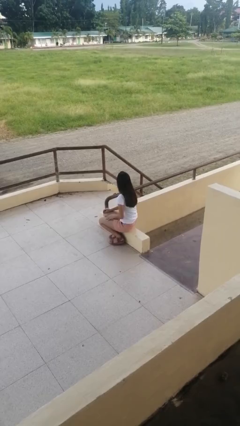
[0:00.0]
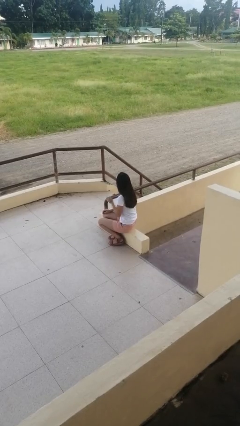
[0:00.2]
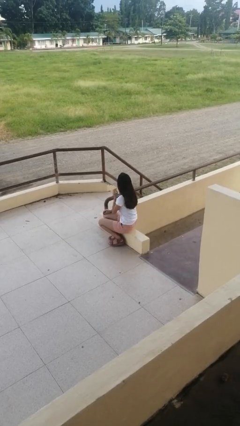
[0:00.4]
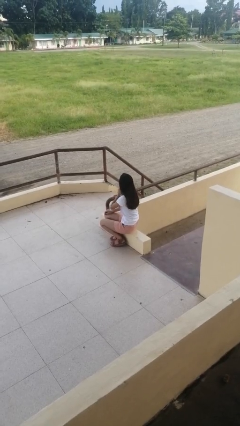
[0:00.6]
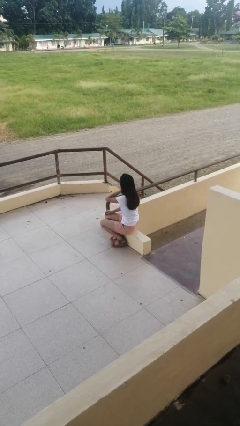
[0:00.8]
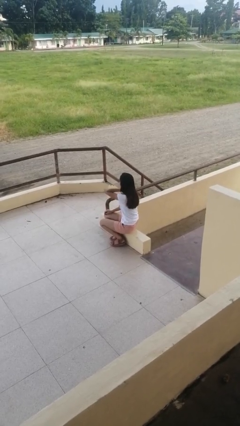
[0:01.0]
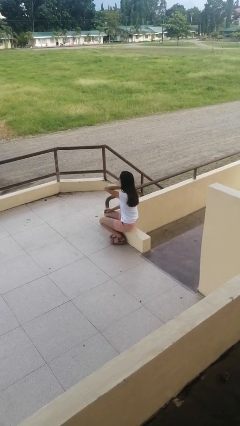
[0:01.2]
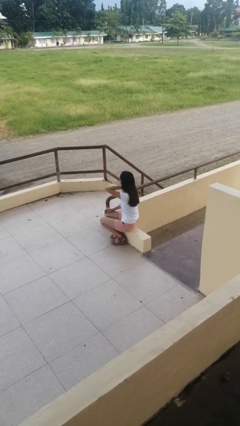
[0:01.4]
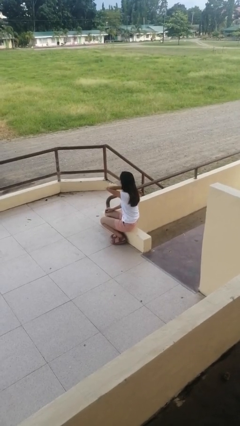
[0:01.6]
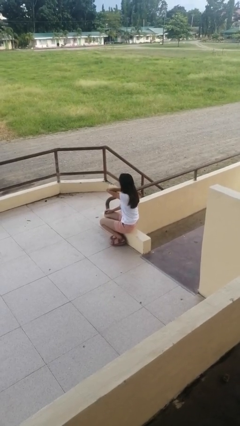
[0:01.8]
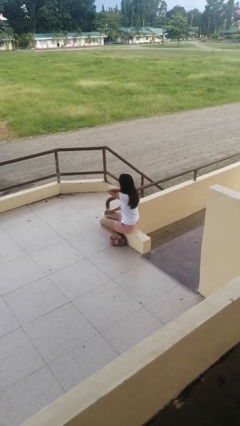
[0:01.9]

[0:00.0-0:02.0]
person rubs neck

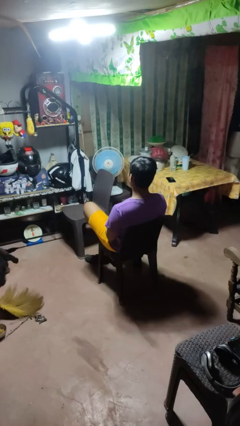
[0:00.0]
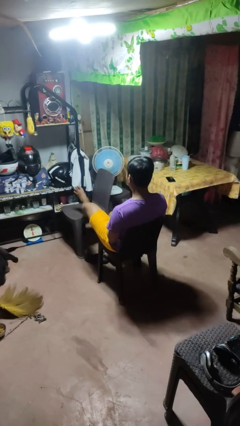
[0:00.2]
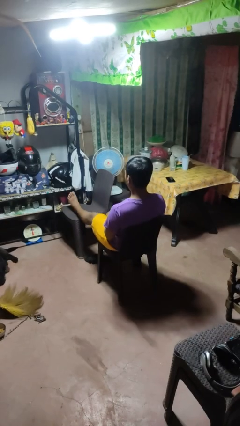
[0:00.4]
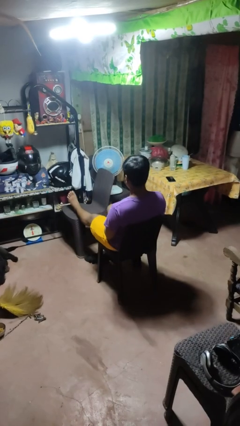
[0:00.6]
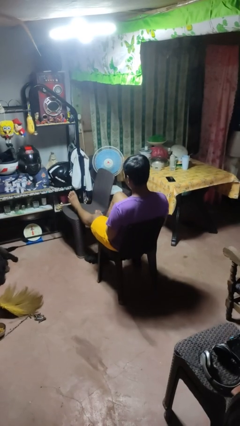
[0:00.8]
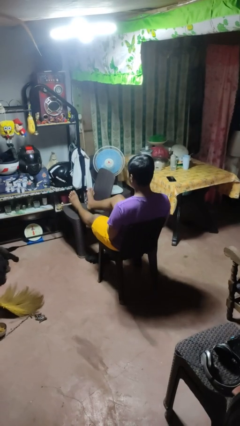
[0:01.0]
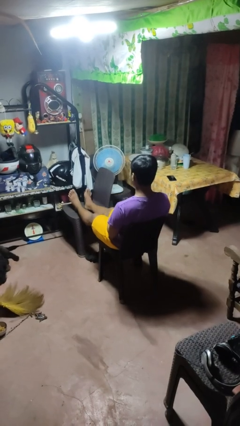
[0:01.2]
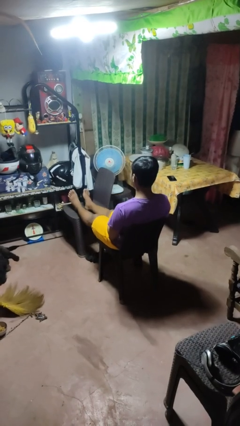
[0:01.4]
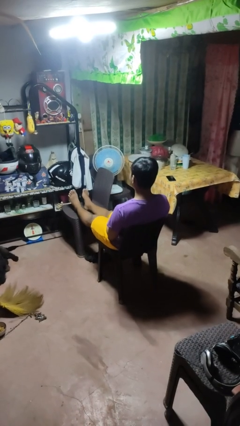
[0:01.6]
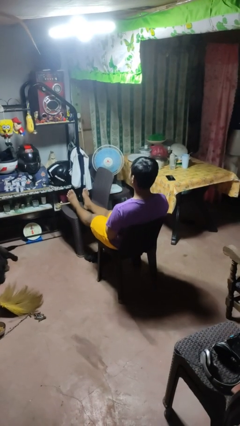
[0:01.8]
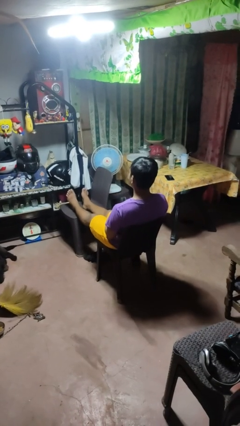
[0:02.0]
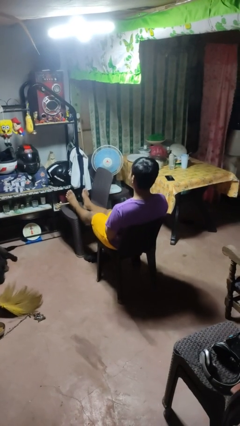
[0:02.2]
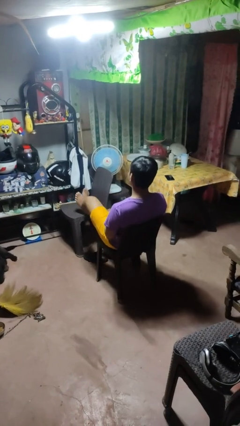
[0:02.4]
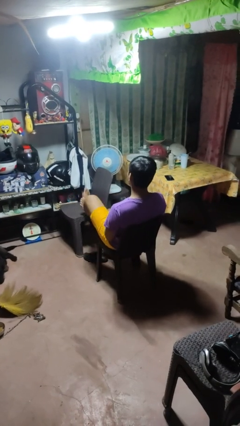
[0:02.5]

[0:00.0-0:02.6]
person puts feet up

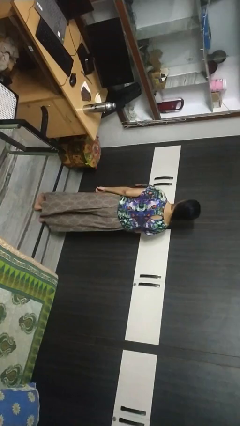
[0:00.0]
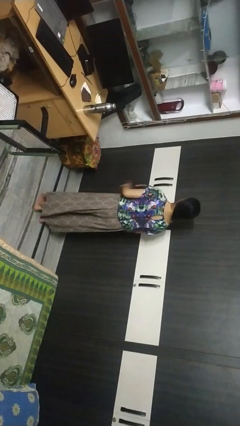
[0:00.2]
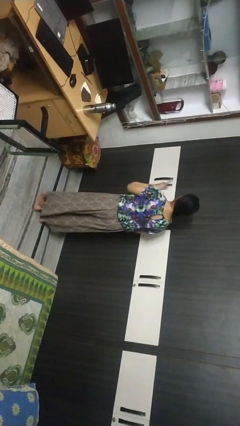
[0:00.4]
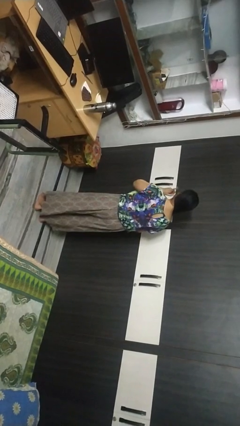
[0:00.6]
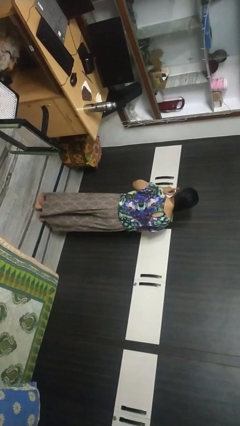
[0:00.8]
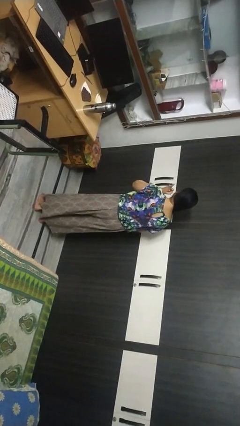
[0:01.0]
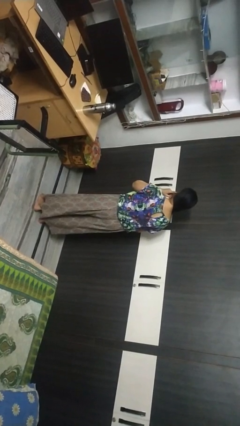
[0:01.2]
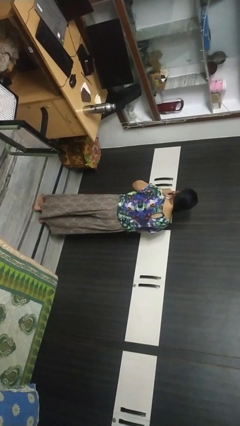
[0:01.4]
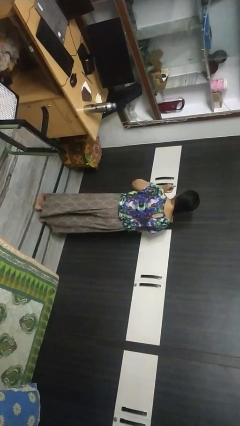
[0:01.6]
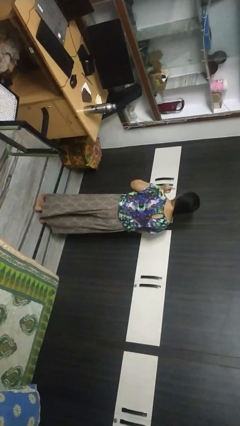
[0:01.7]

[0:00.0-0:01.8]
person gestures listen closely

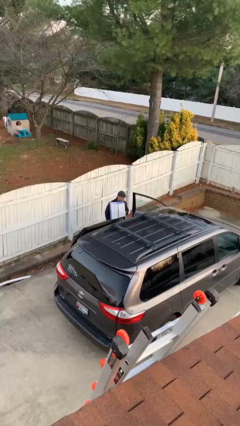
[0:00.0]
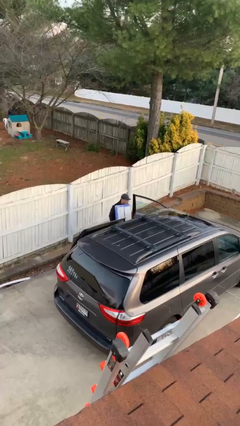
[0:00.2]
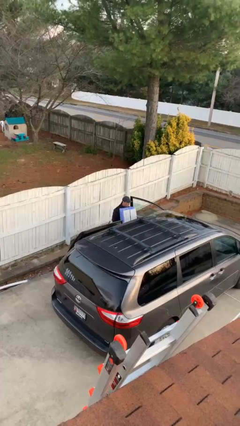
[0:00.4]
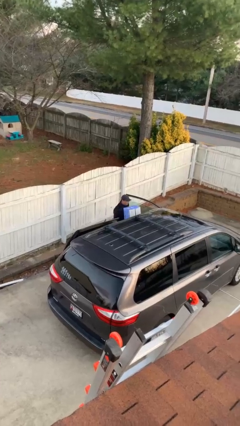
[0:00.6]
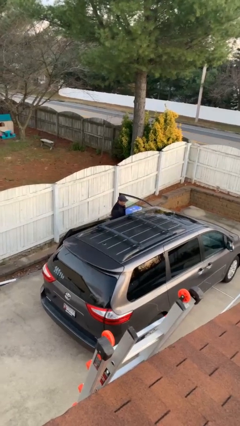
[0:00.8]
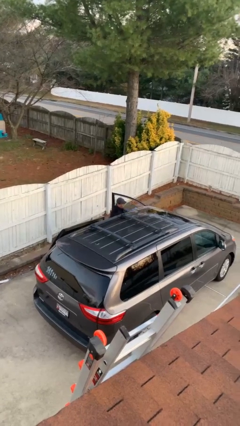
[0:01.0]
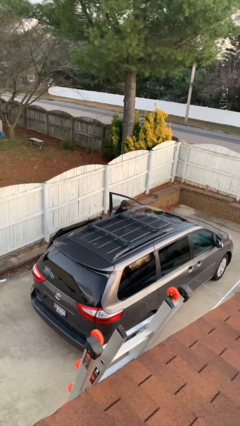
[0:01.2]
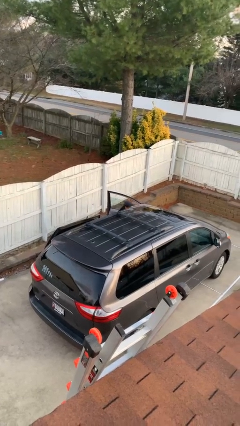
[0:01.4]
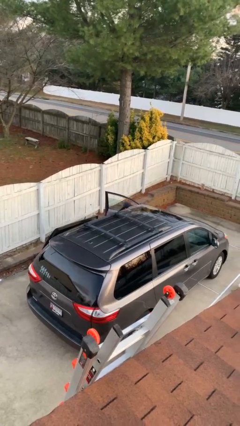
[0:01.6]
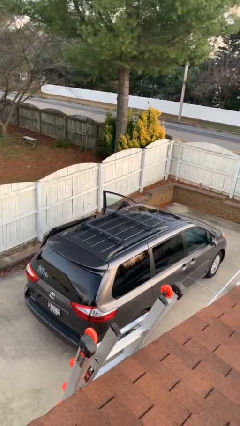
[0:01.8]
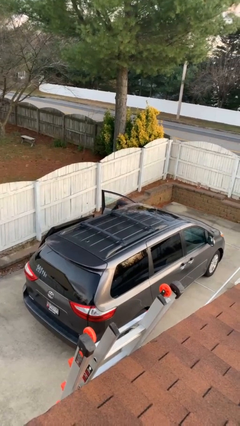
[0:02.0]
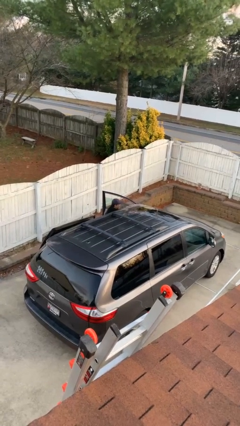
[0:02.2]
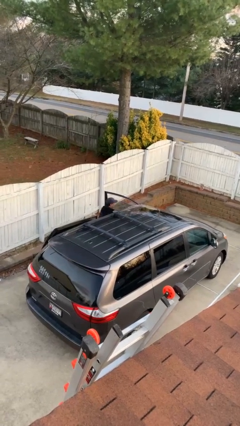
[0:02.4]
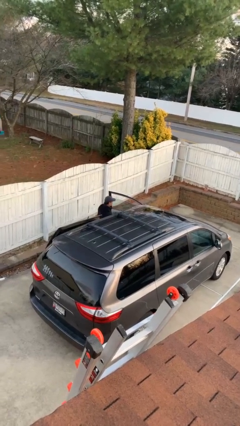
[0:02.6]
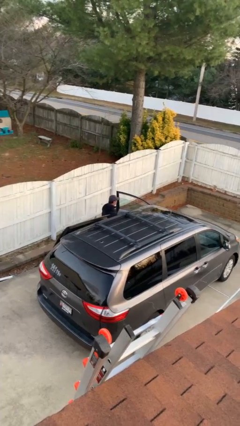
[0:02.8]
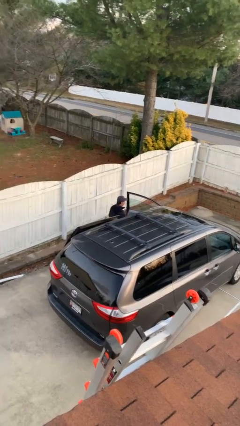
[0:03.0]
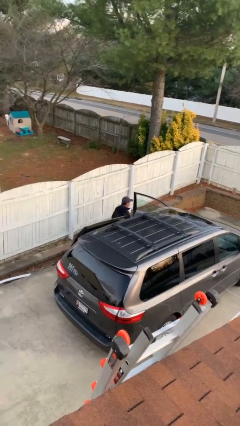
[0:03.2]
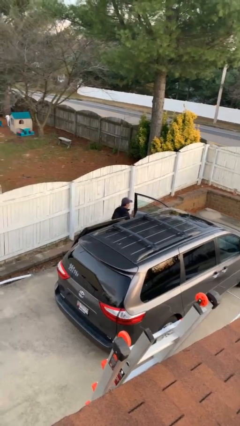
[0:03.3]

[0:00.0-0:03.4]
person loads car

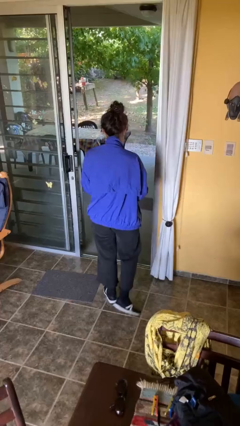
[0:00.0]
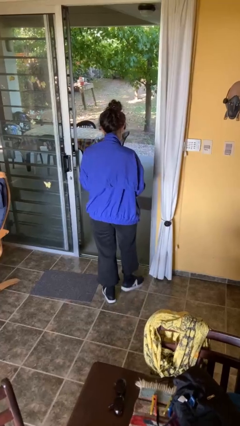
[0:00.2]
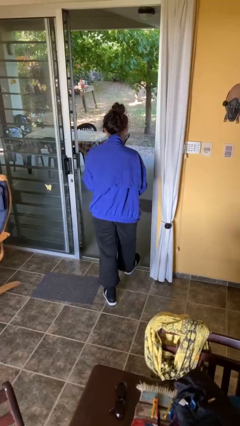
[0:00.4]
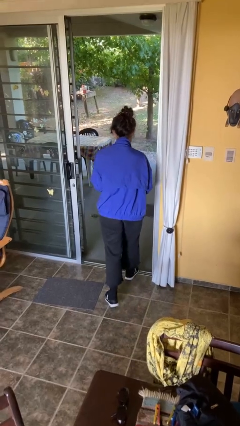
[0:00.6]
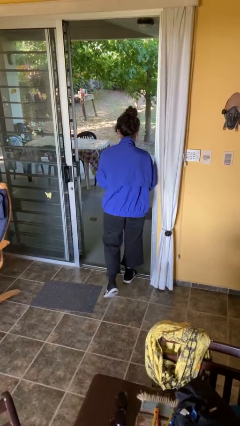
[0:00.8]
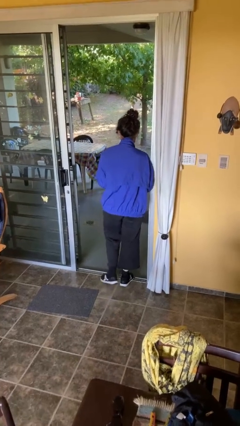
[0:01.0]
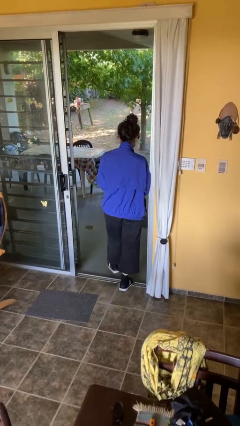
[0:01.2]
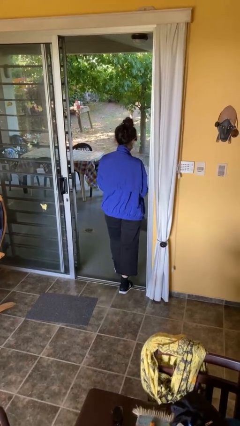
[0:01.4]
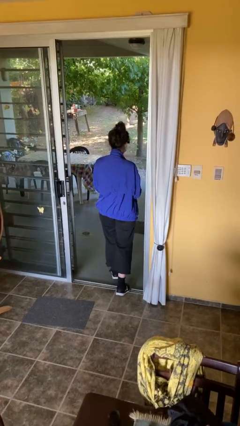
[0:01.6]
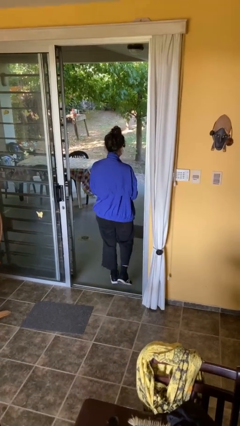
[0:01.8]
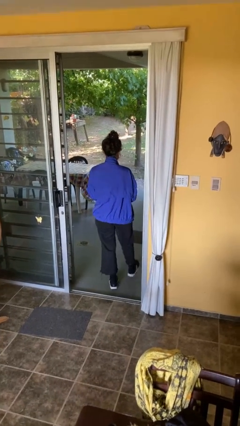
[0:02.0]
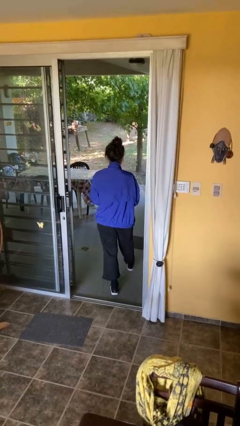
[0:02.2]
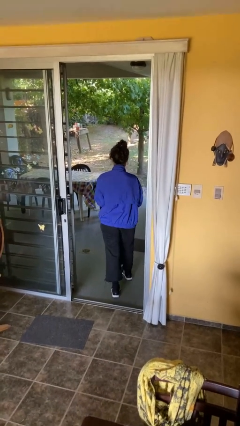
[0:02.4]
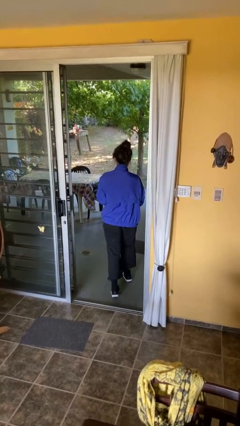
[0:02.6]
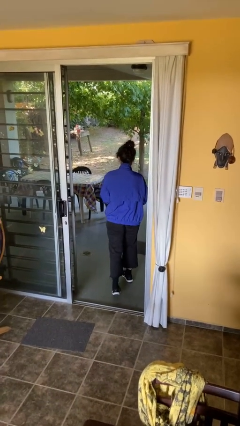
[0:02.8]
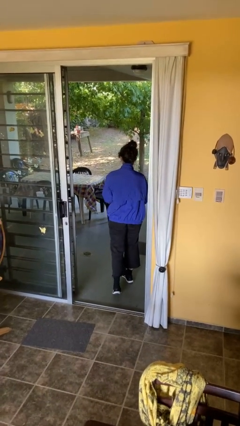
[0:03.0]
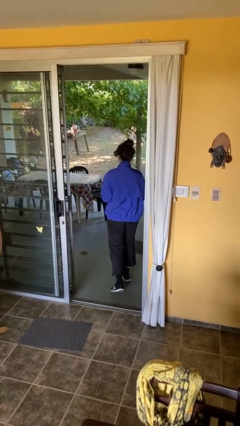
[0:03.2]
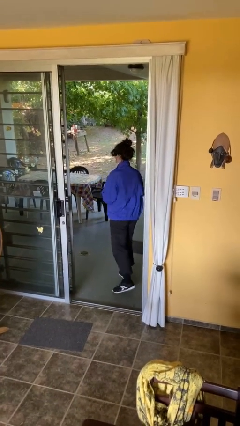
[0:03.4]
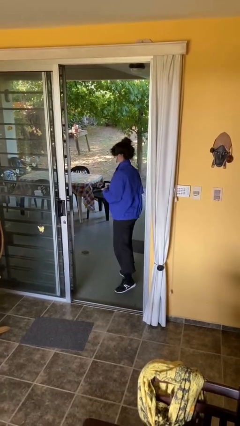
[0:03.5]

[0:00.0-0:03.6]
person exits scene through structure

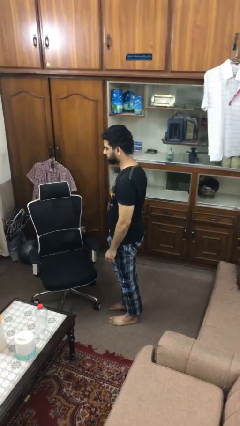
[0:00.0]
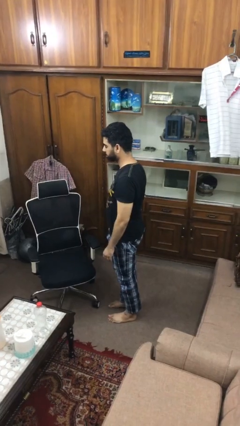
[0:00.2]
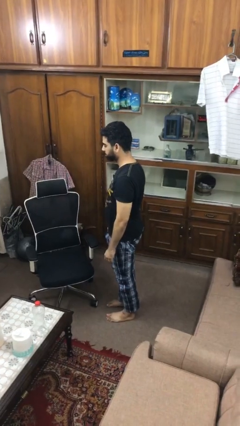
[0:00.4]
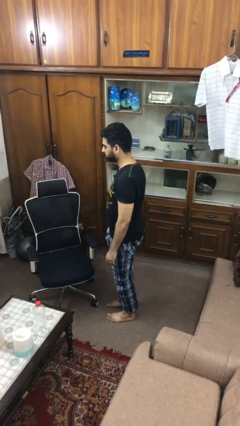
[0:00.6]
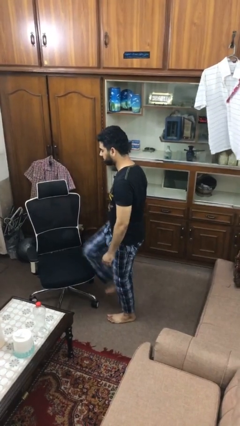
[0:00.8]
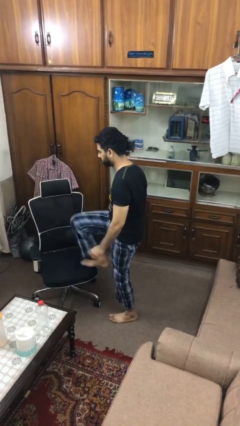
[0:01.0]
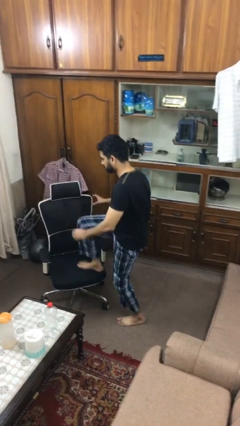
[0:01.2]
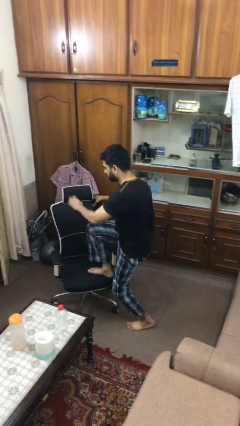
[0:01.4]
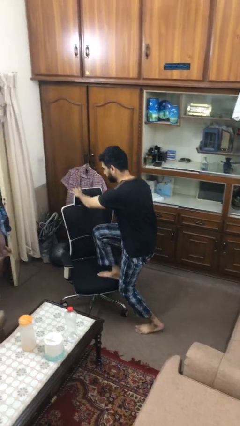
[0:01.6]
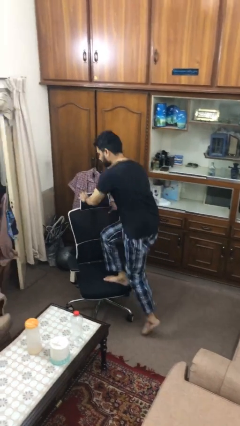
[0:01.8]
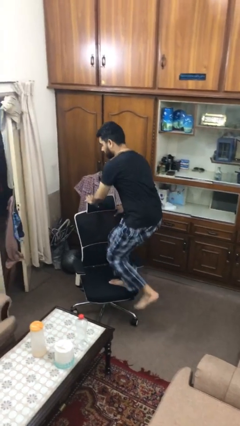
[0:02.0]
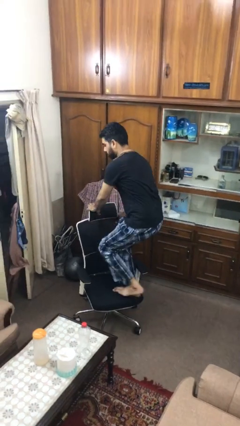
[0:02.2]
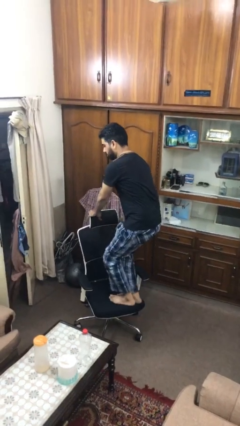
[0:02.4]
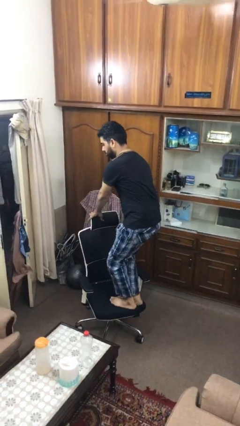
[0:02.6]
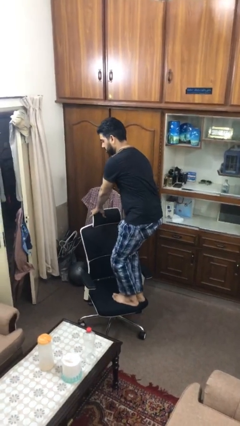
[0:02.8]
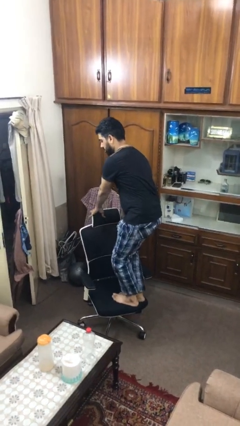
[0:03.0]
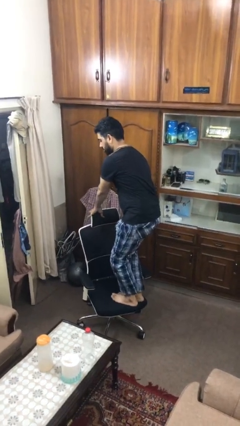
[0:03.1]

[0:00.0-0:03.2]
person climbs on chair

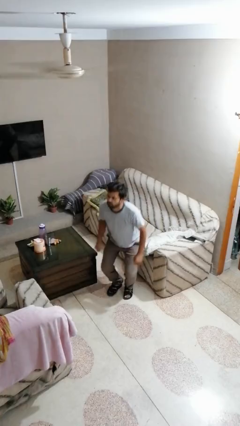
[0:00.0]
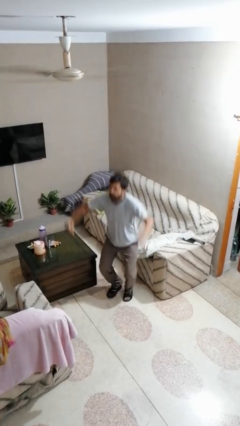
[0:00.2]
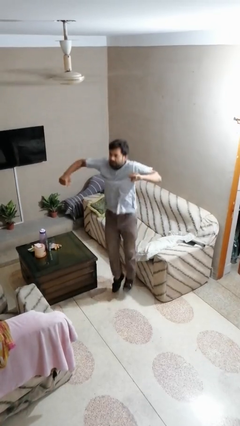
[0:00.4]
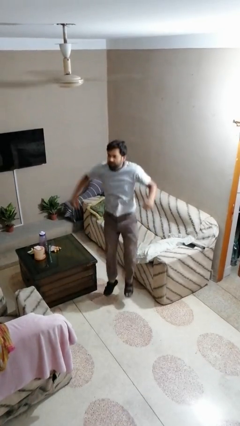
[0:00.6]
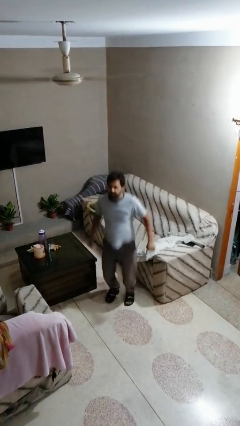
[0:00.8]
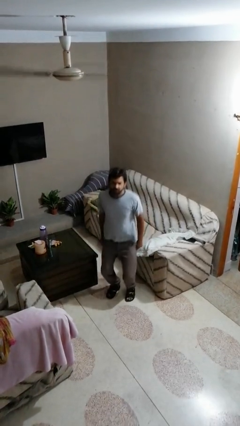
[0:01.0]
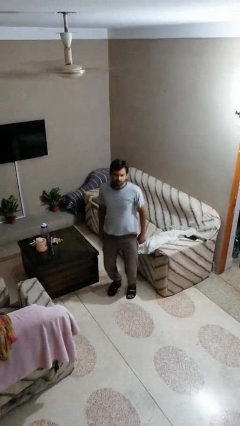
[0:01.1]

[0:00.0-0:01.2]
person jumps
